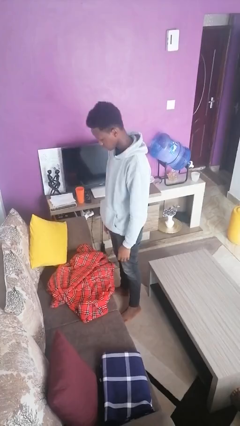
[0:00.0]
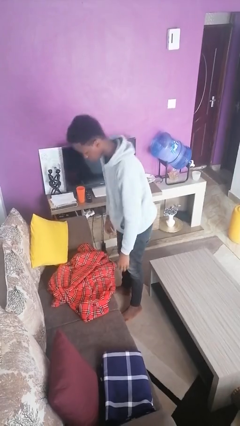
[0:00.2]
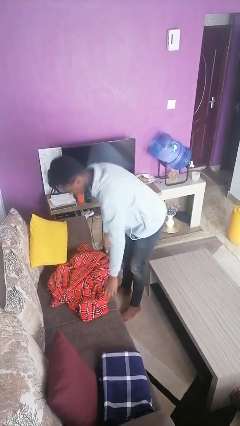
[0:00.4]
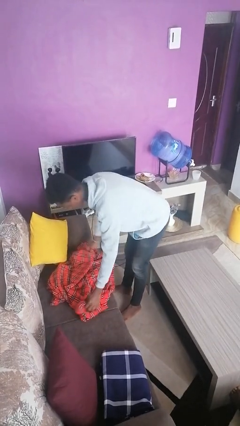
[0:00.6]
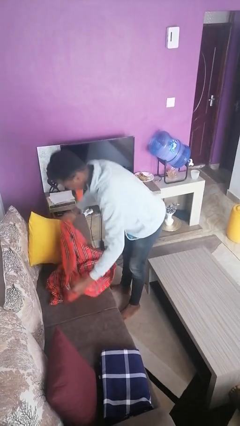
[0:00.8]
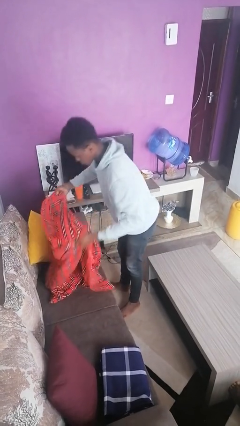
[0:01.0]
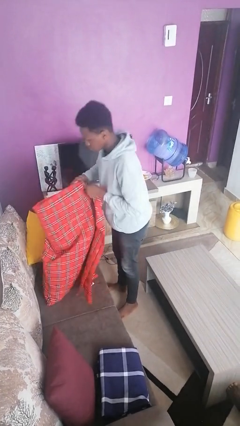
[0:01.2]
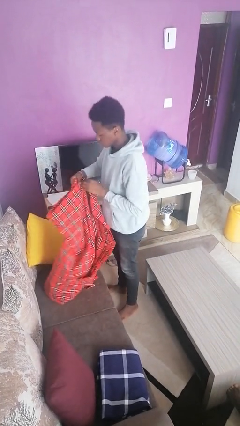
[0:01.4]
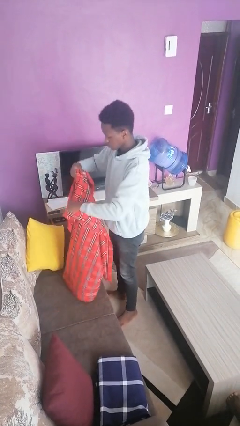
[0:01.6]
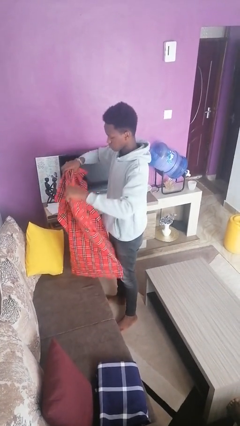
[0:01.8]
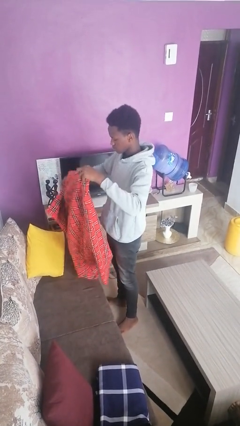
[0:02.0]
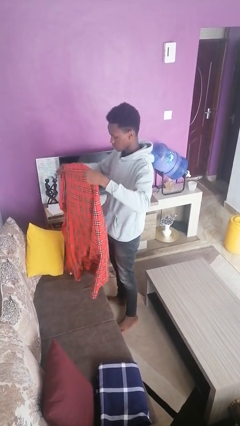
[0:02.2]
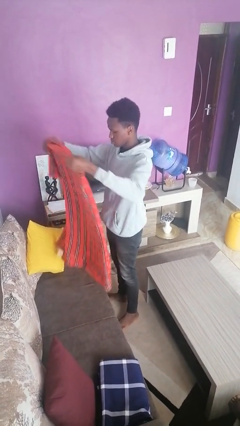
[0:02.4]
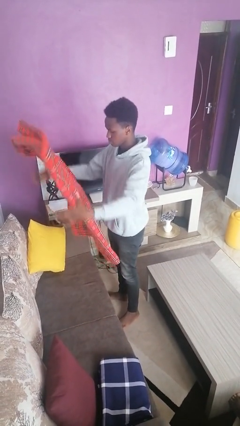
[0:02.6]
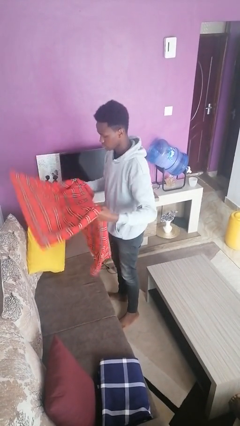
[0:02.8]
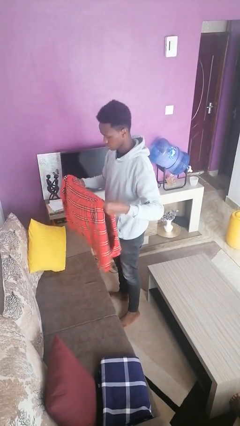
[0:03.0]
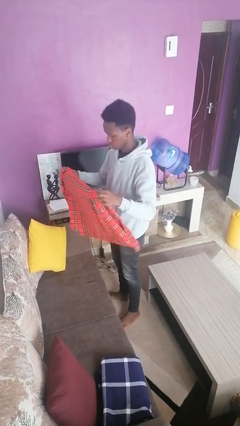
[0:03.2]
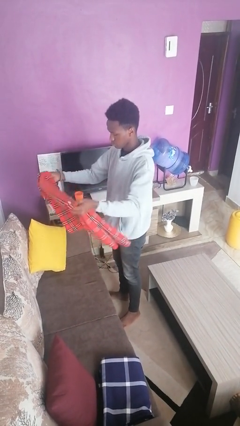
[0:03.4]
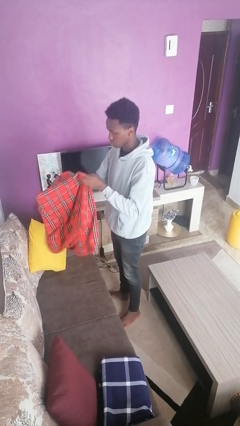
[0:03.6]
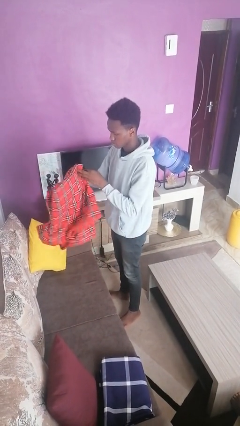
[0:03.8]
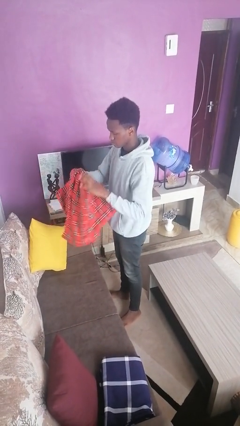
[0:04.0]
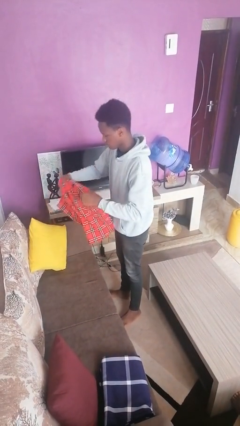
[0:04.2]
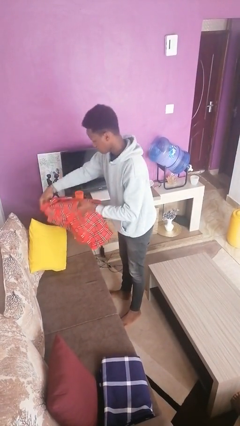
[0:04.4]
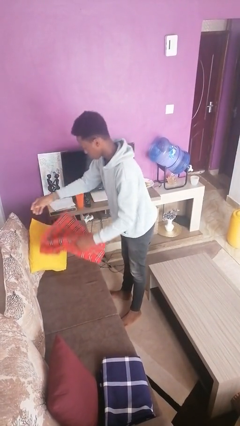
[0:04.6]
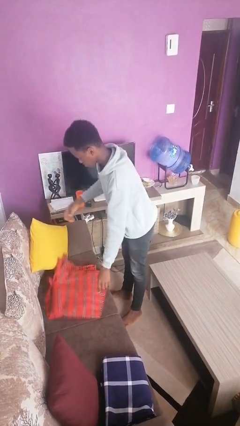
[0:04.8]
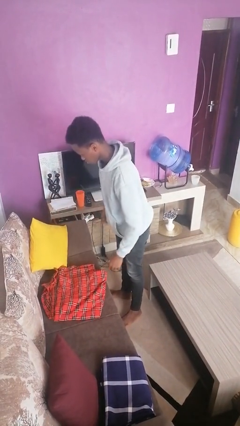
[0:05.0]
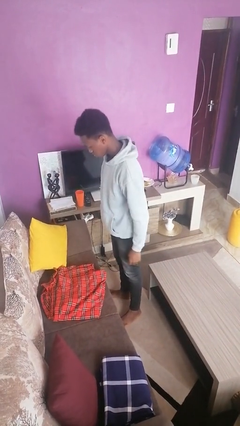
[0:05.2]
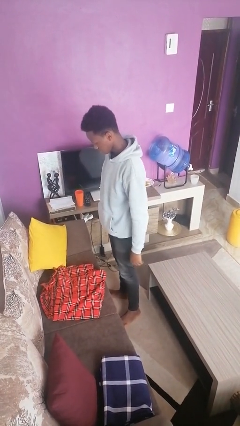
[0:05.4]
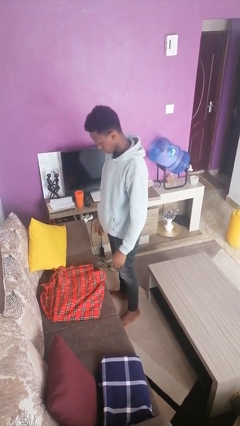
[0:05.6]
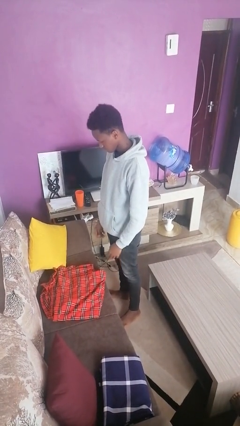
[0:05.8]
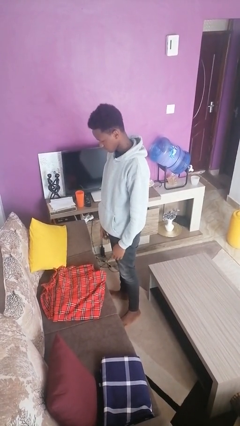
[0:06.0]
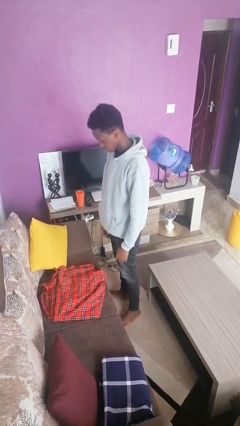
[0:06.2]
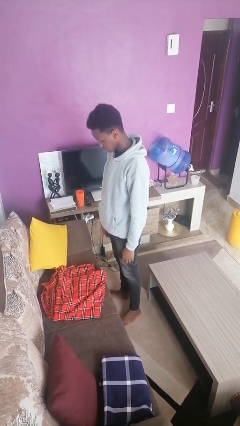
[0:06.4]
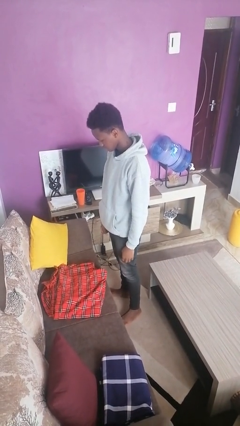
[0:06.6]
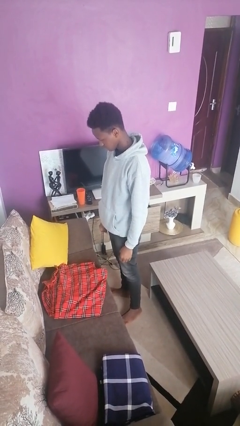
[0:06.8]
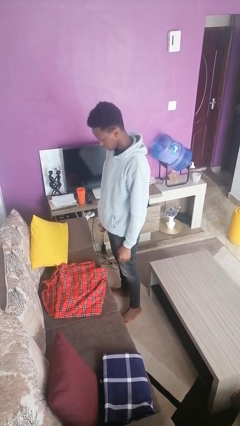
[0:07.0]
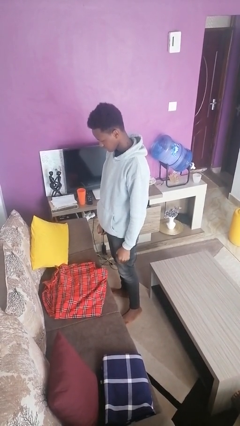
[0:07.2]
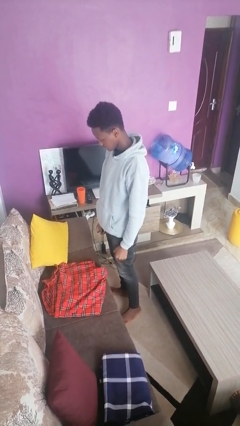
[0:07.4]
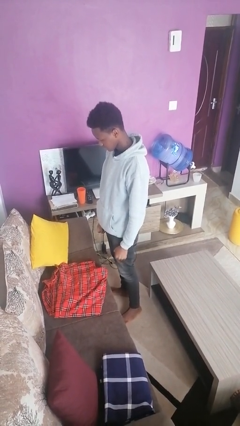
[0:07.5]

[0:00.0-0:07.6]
person folds blanket

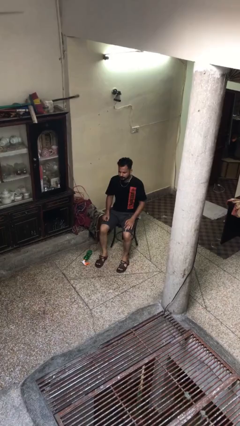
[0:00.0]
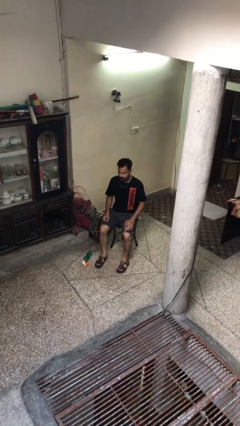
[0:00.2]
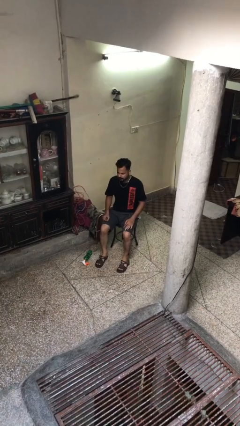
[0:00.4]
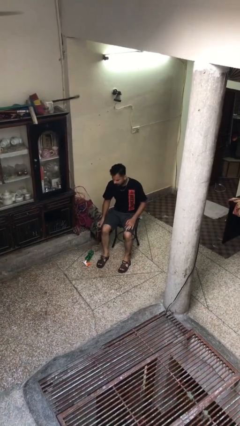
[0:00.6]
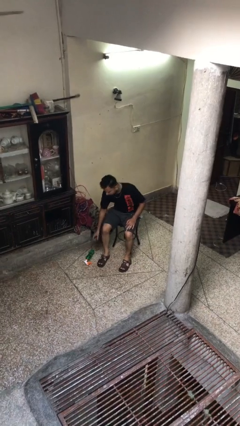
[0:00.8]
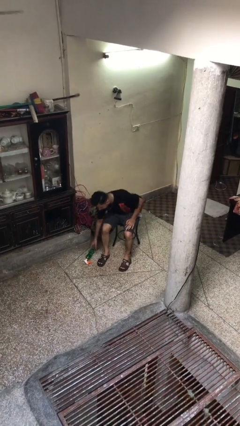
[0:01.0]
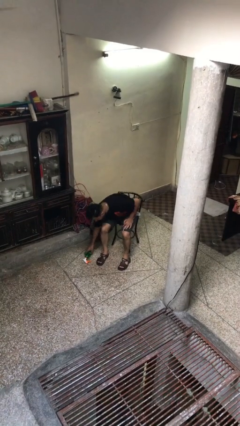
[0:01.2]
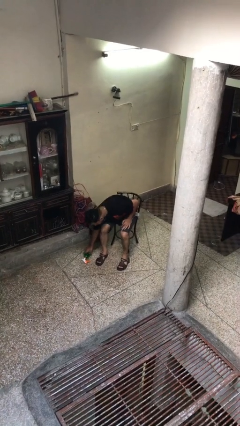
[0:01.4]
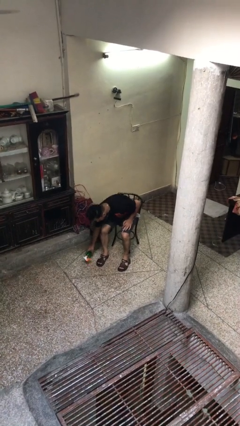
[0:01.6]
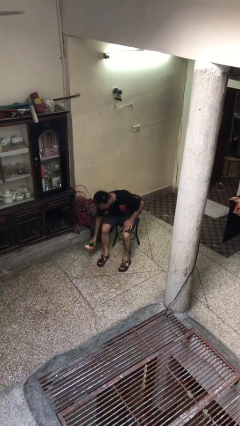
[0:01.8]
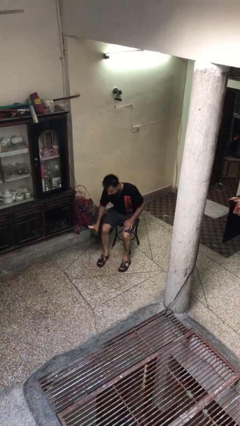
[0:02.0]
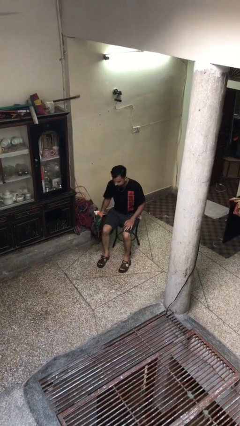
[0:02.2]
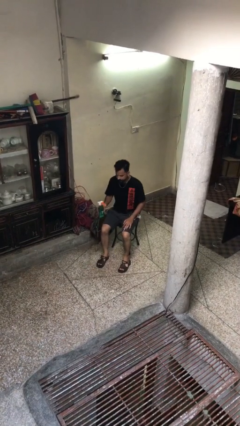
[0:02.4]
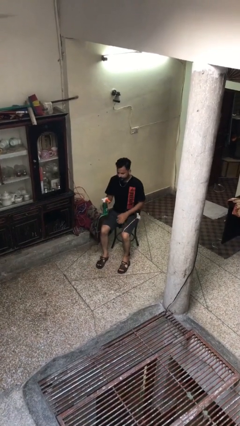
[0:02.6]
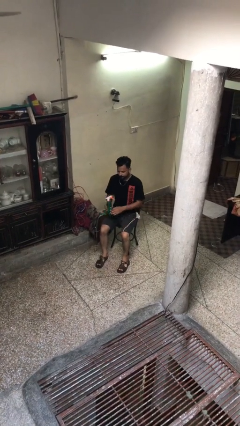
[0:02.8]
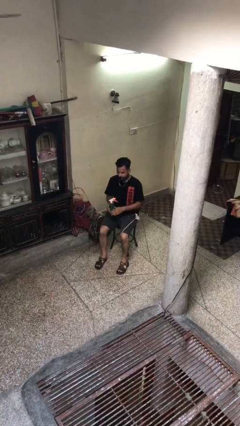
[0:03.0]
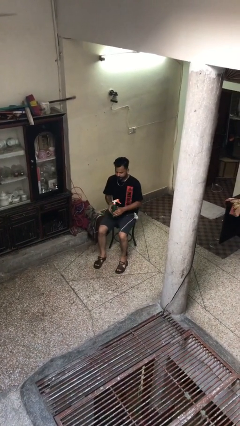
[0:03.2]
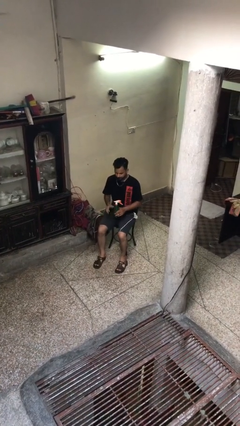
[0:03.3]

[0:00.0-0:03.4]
person picks up object from floor

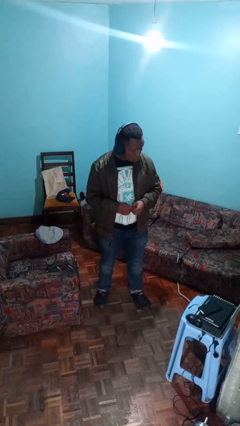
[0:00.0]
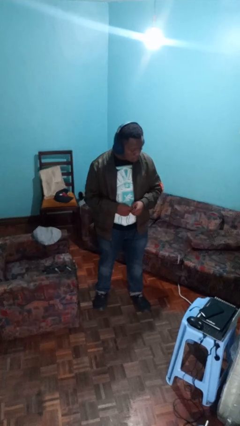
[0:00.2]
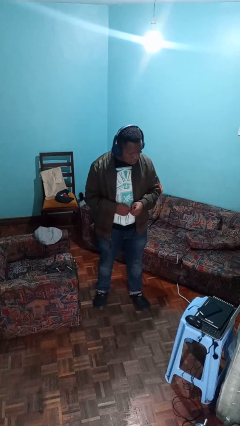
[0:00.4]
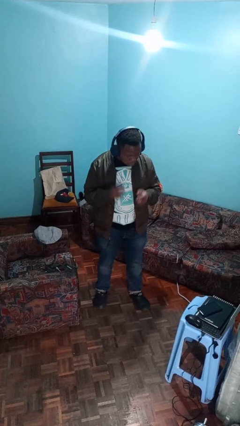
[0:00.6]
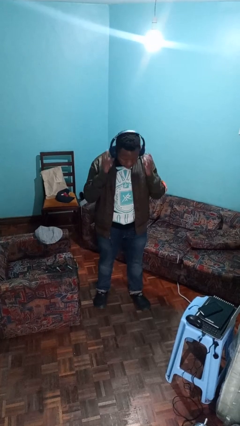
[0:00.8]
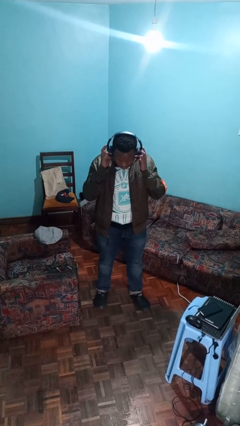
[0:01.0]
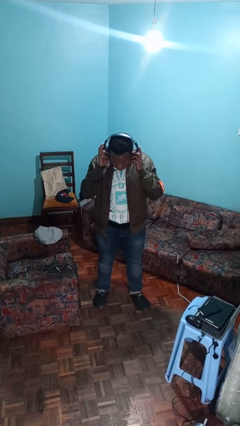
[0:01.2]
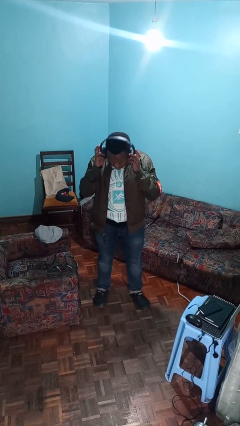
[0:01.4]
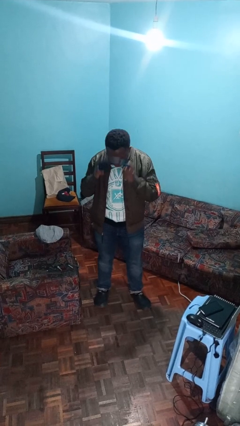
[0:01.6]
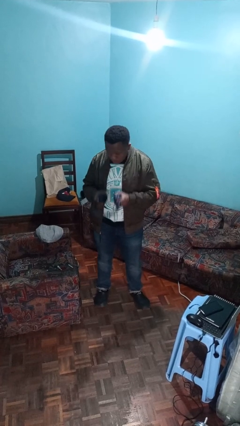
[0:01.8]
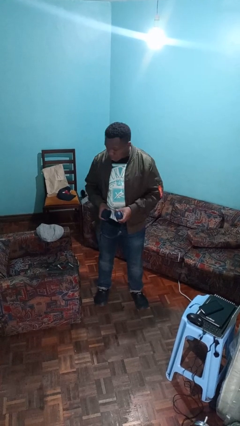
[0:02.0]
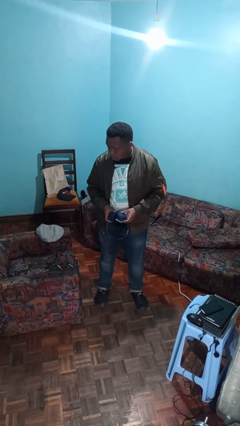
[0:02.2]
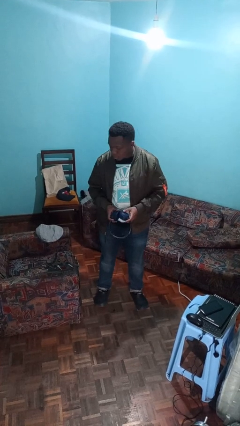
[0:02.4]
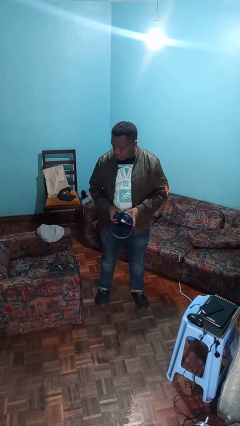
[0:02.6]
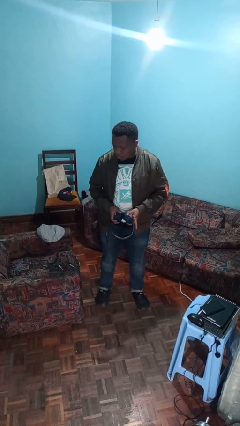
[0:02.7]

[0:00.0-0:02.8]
person takes off headphones

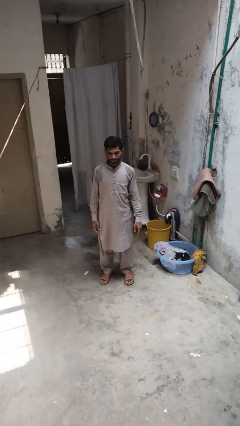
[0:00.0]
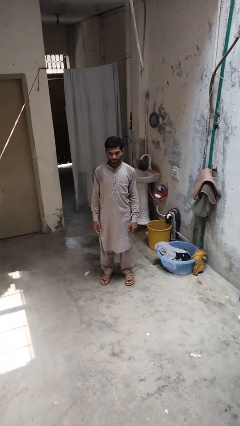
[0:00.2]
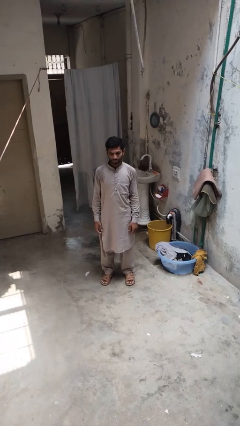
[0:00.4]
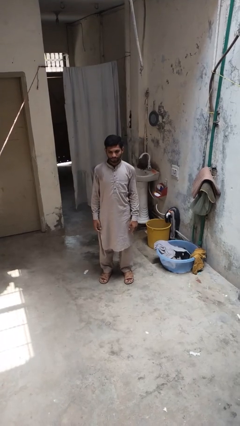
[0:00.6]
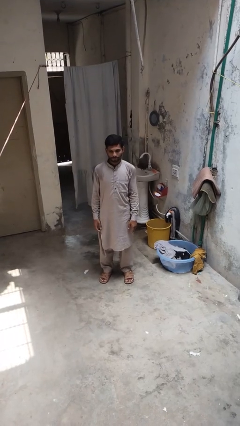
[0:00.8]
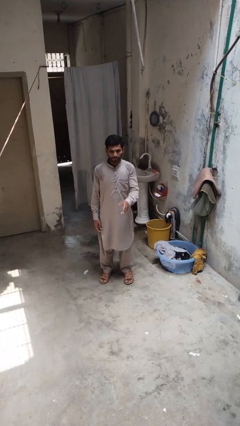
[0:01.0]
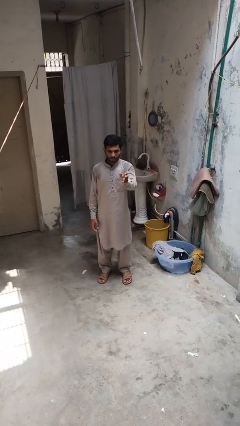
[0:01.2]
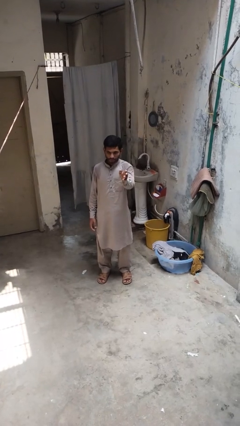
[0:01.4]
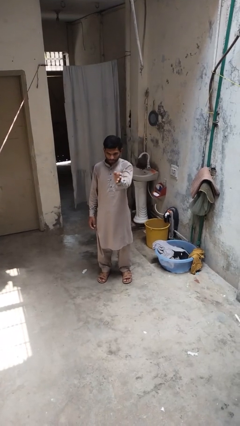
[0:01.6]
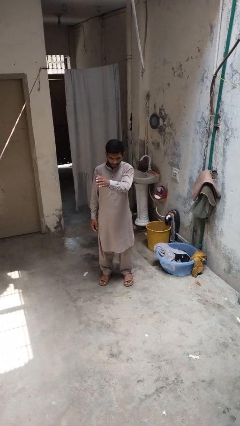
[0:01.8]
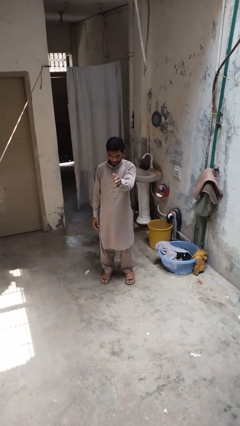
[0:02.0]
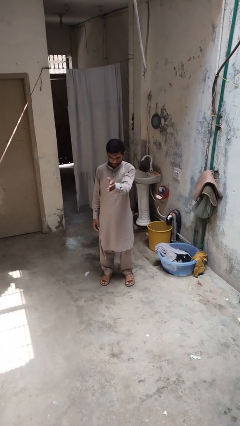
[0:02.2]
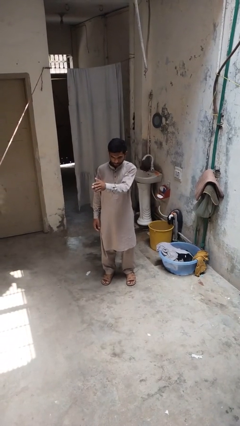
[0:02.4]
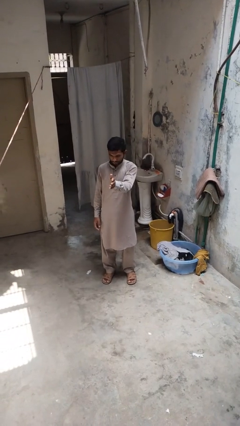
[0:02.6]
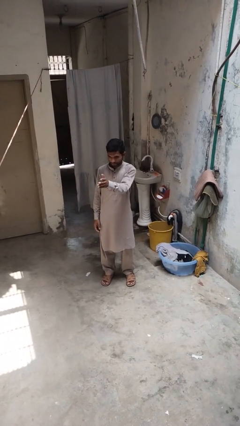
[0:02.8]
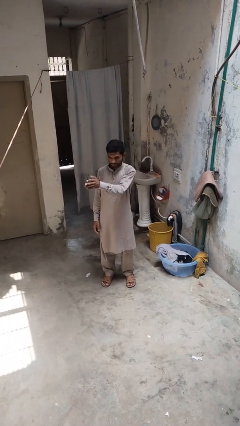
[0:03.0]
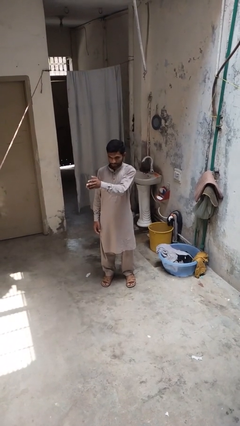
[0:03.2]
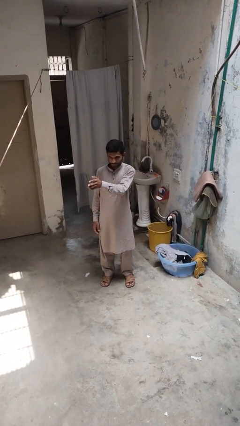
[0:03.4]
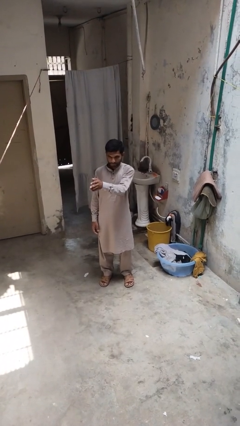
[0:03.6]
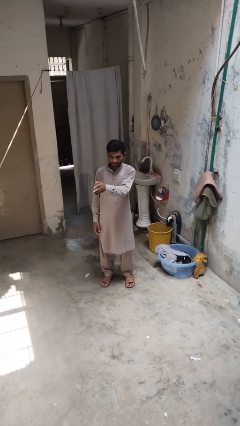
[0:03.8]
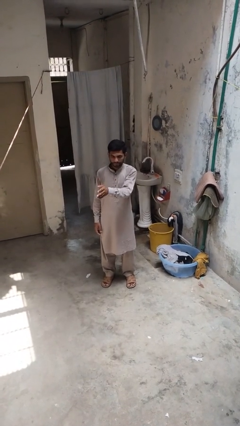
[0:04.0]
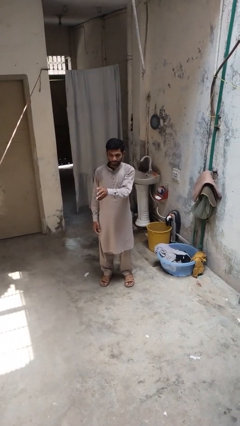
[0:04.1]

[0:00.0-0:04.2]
person gestures swipe right
